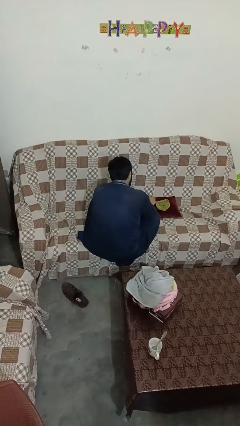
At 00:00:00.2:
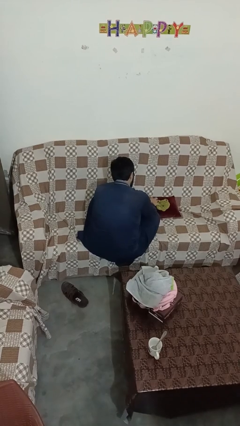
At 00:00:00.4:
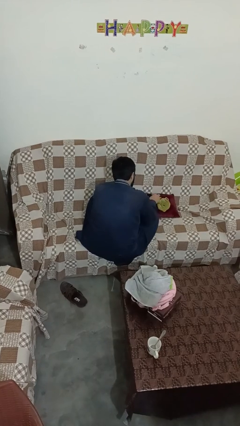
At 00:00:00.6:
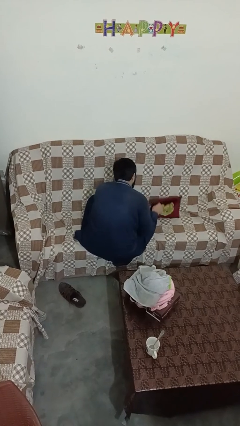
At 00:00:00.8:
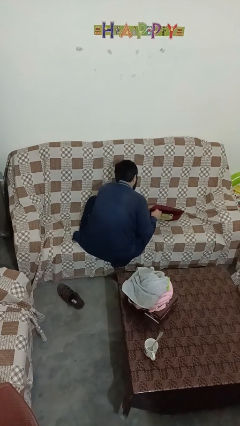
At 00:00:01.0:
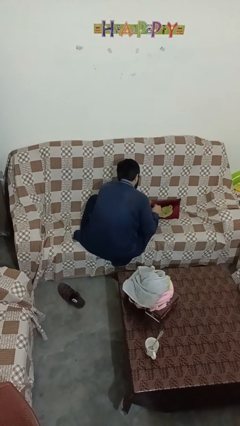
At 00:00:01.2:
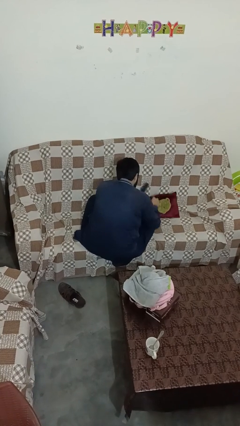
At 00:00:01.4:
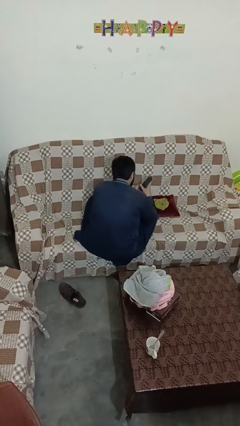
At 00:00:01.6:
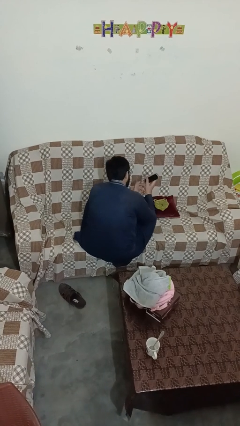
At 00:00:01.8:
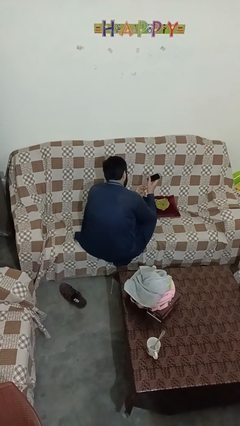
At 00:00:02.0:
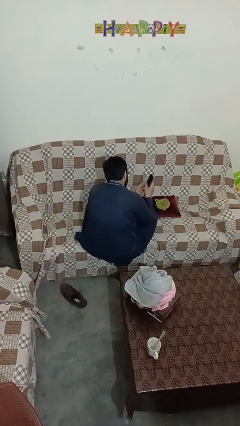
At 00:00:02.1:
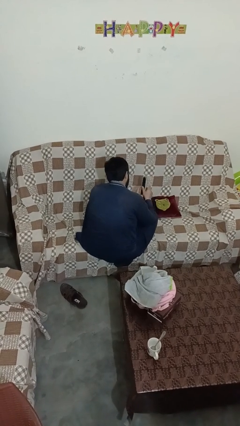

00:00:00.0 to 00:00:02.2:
person searches in couch

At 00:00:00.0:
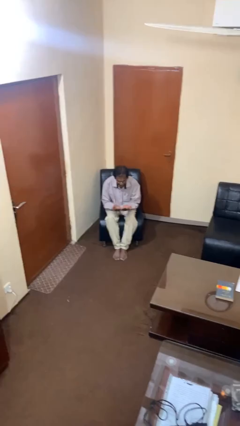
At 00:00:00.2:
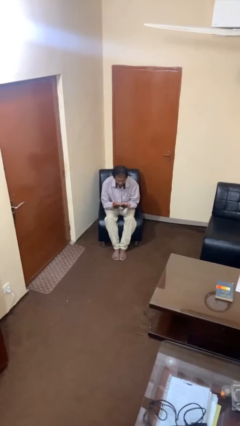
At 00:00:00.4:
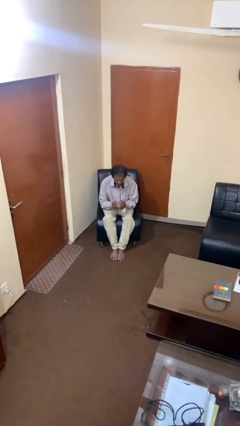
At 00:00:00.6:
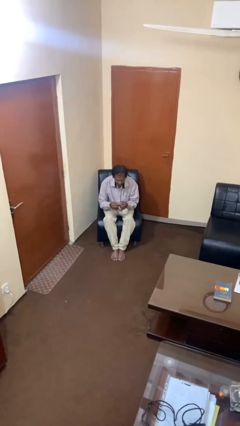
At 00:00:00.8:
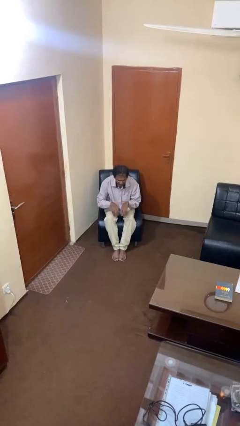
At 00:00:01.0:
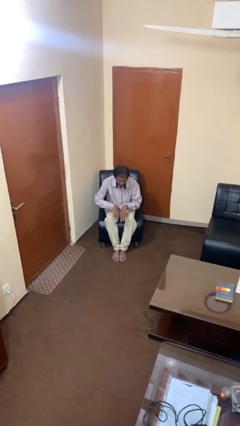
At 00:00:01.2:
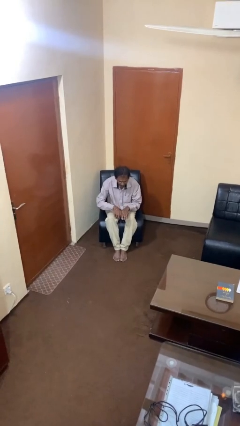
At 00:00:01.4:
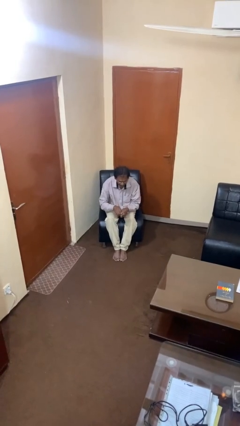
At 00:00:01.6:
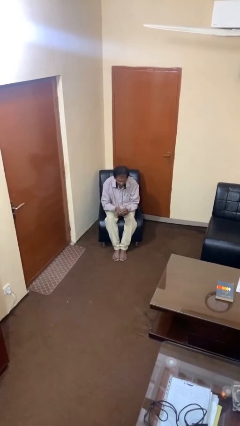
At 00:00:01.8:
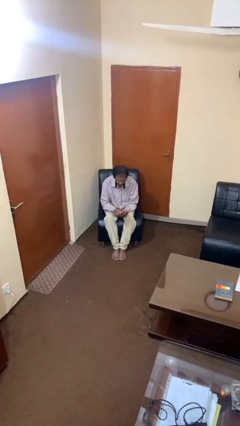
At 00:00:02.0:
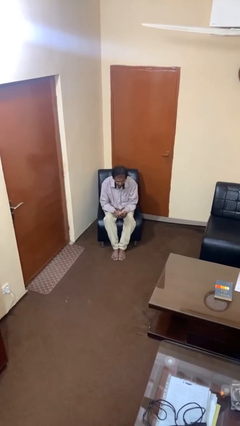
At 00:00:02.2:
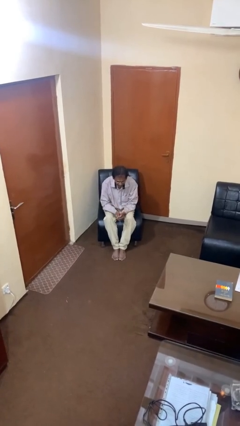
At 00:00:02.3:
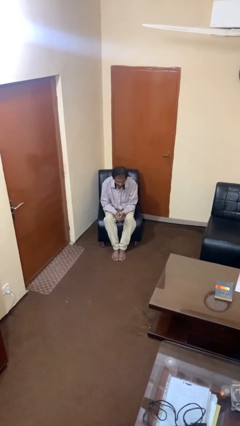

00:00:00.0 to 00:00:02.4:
person looks at hands in lap

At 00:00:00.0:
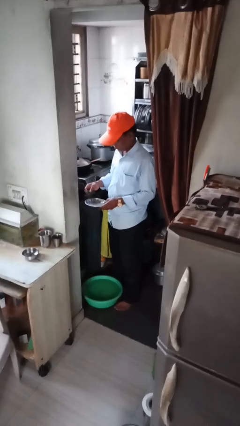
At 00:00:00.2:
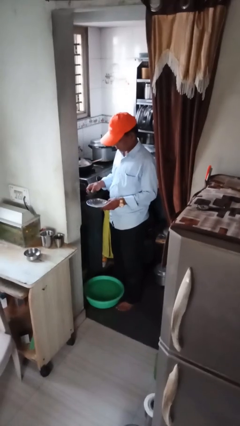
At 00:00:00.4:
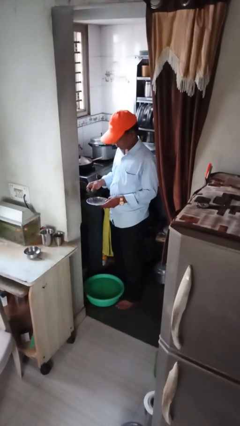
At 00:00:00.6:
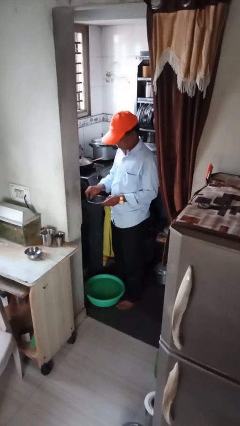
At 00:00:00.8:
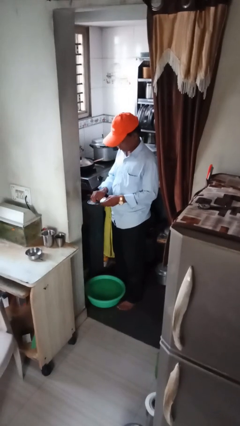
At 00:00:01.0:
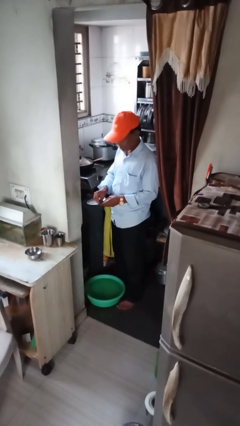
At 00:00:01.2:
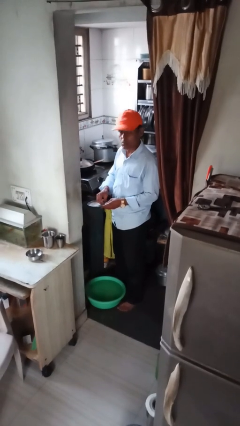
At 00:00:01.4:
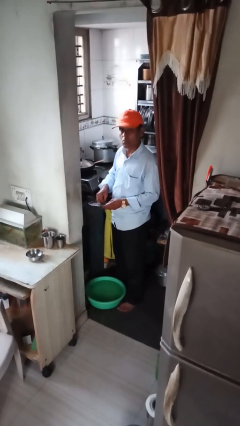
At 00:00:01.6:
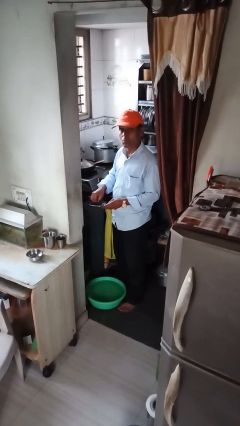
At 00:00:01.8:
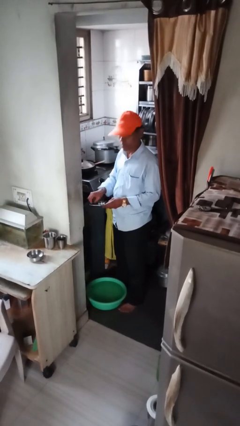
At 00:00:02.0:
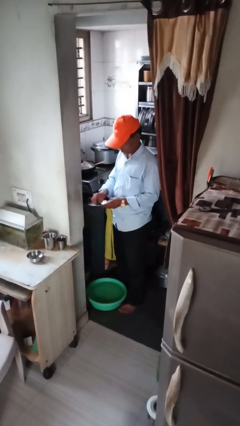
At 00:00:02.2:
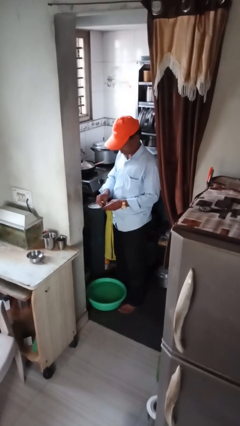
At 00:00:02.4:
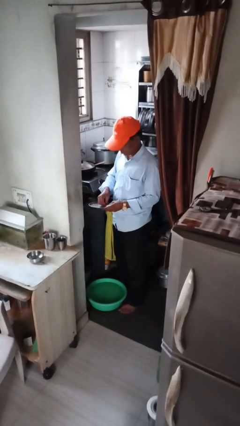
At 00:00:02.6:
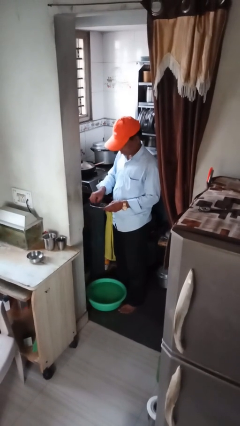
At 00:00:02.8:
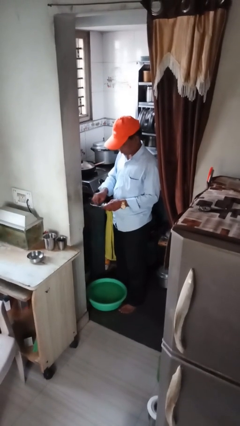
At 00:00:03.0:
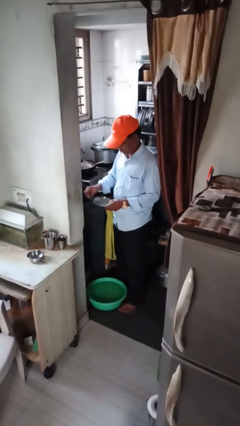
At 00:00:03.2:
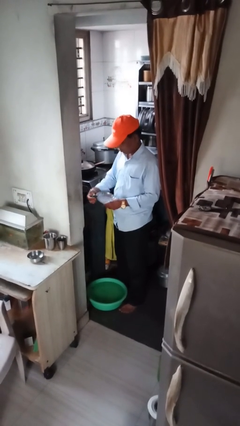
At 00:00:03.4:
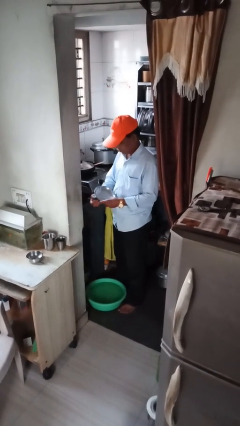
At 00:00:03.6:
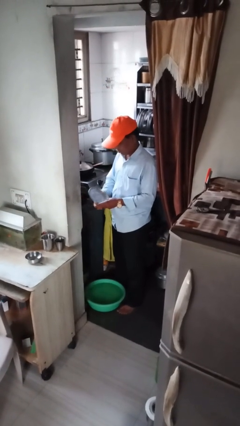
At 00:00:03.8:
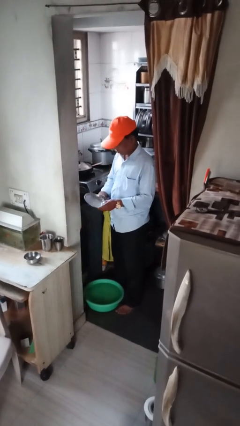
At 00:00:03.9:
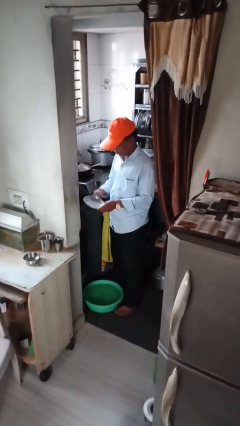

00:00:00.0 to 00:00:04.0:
person washes dish

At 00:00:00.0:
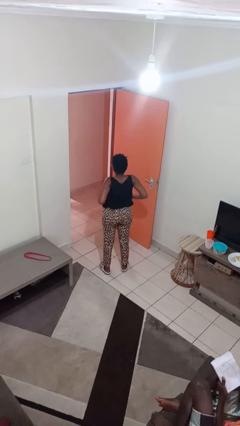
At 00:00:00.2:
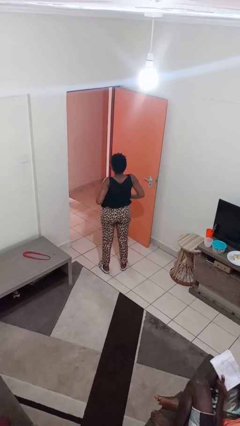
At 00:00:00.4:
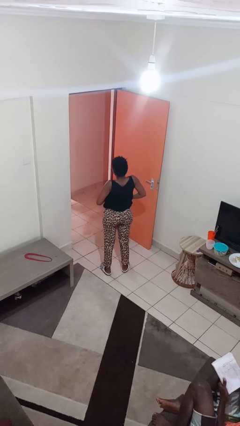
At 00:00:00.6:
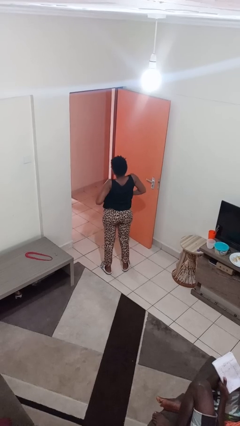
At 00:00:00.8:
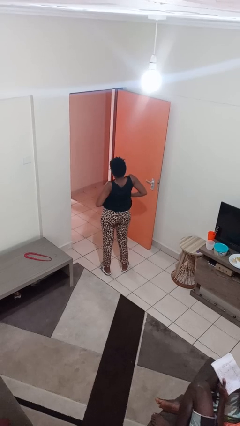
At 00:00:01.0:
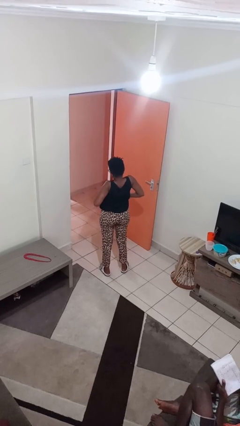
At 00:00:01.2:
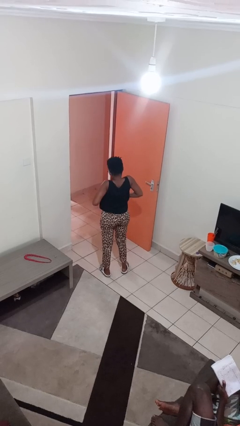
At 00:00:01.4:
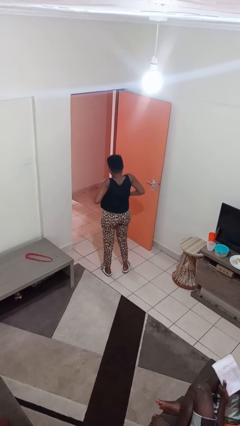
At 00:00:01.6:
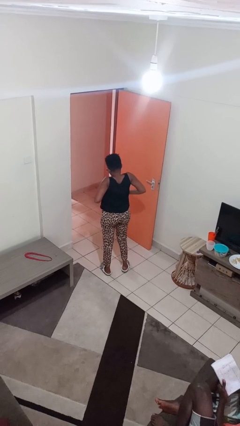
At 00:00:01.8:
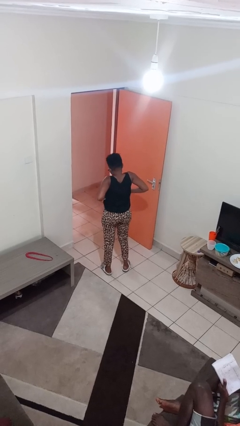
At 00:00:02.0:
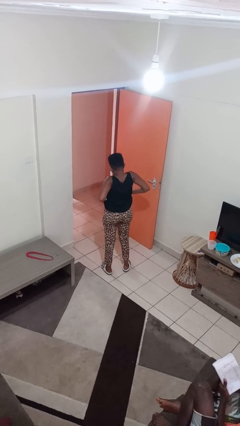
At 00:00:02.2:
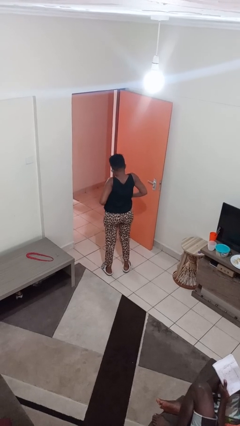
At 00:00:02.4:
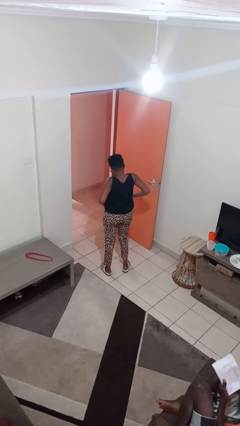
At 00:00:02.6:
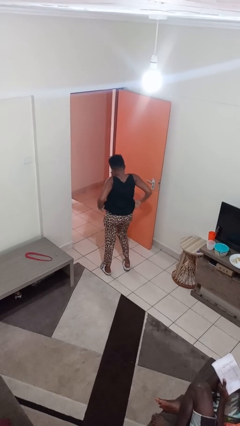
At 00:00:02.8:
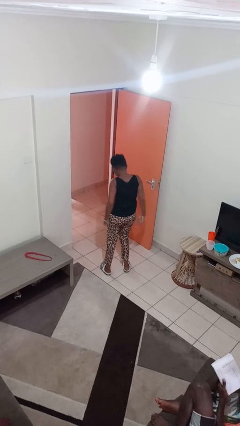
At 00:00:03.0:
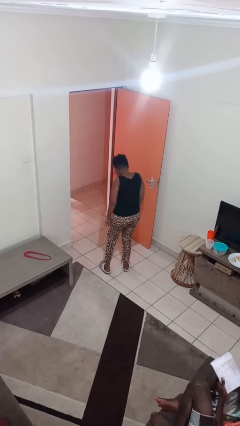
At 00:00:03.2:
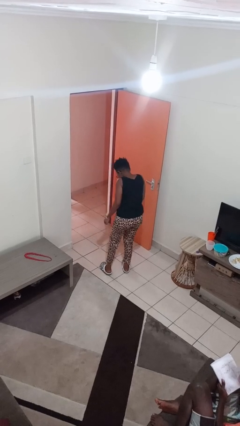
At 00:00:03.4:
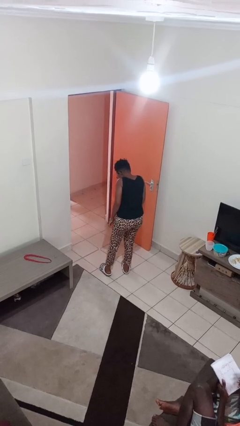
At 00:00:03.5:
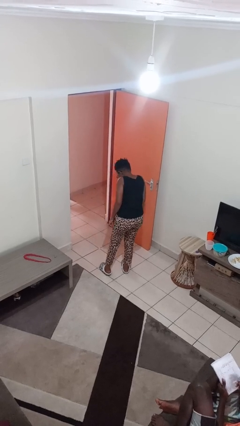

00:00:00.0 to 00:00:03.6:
person hikes up pants

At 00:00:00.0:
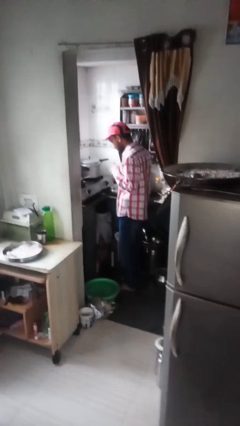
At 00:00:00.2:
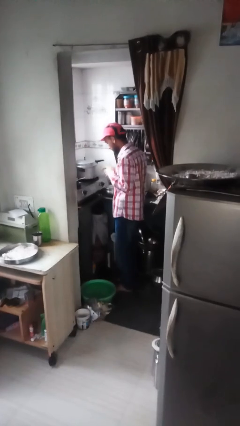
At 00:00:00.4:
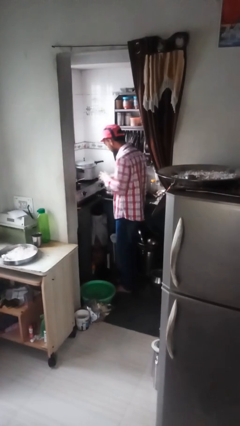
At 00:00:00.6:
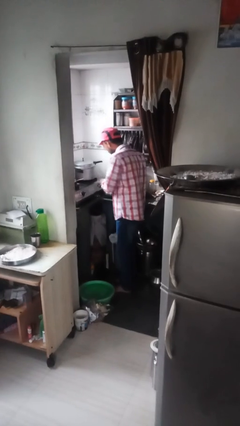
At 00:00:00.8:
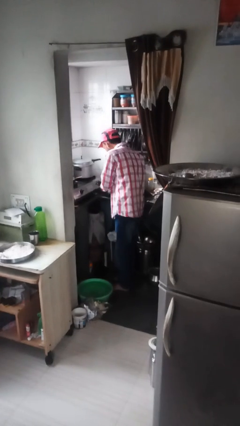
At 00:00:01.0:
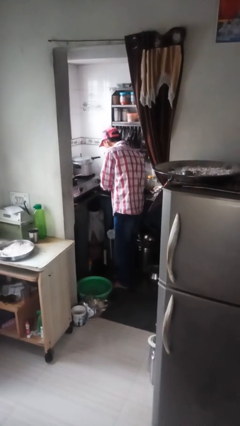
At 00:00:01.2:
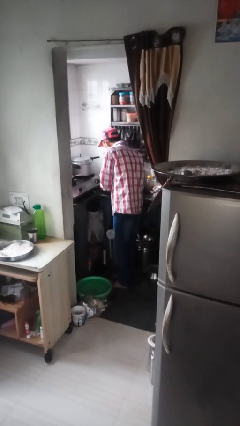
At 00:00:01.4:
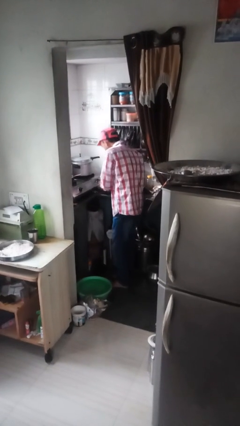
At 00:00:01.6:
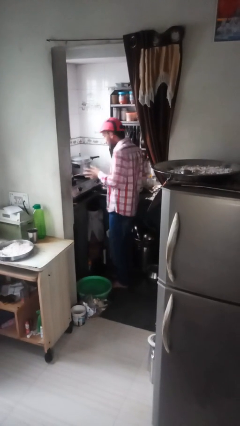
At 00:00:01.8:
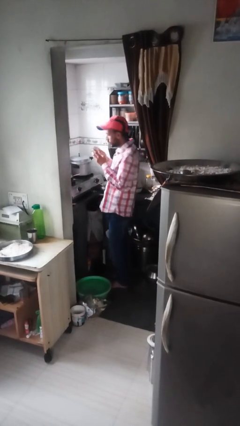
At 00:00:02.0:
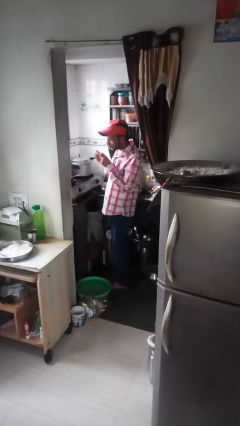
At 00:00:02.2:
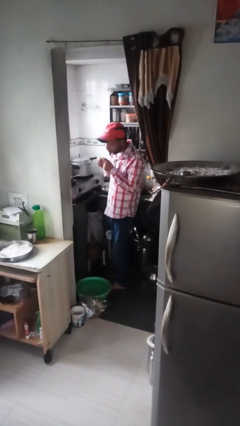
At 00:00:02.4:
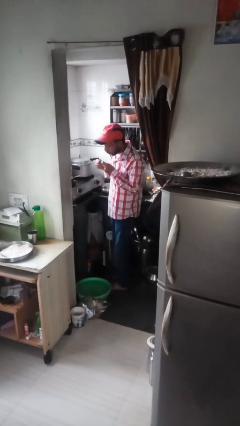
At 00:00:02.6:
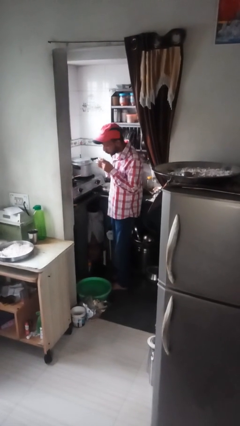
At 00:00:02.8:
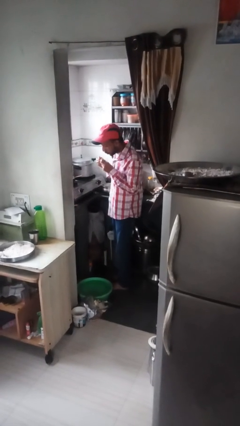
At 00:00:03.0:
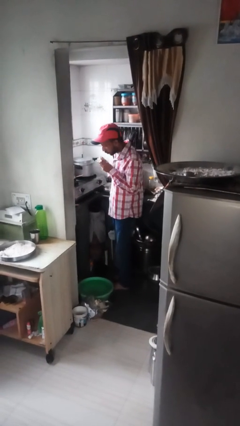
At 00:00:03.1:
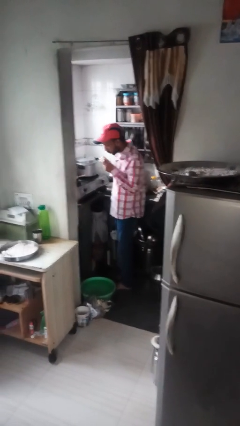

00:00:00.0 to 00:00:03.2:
person burns hand

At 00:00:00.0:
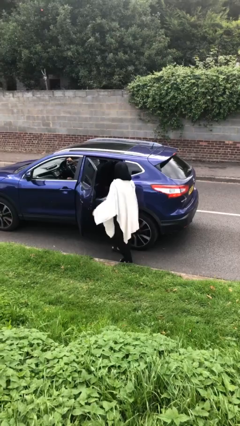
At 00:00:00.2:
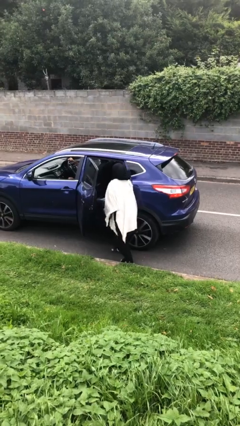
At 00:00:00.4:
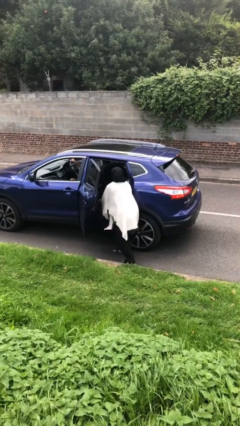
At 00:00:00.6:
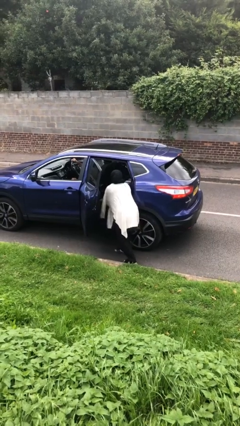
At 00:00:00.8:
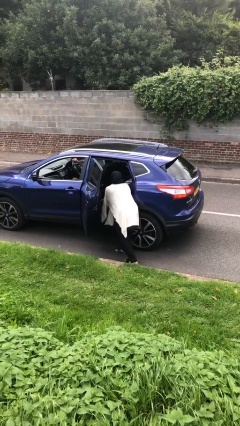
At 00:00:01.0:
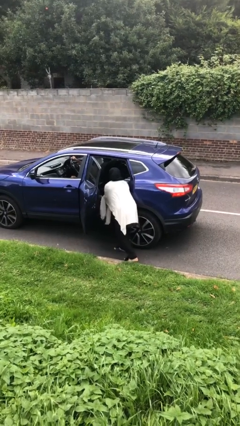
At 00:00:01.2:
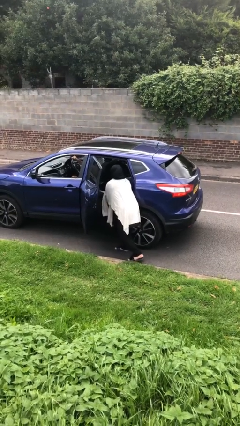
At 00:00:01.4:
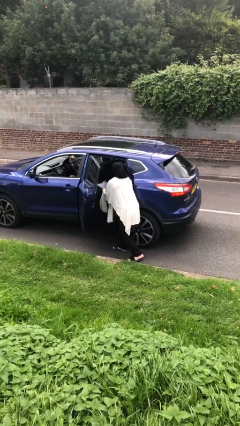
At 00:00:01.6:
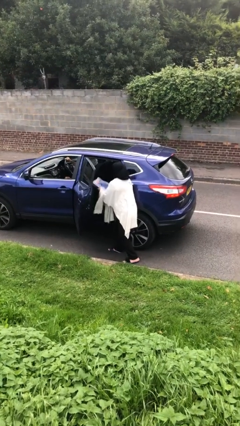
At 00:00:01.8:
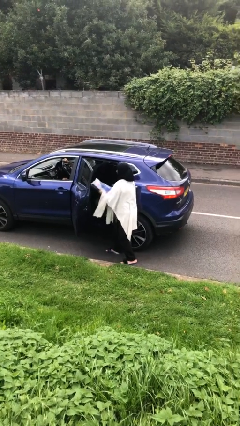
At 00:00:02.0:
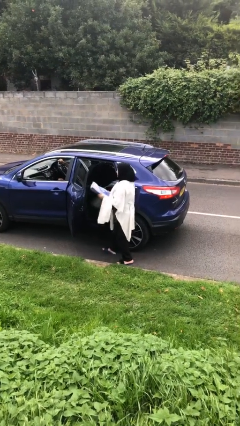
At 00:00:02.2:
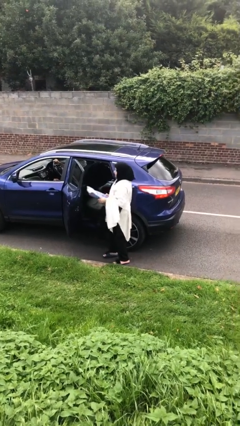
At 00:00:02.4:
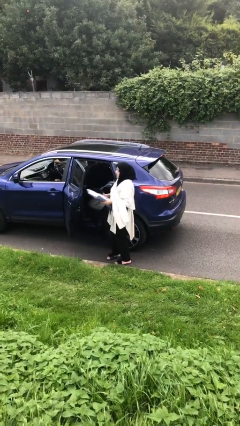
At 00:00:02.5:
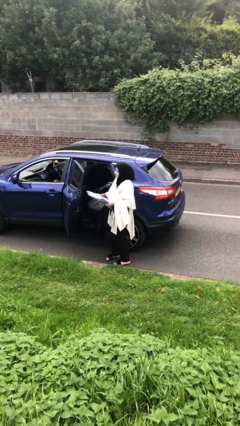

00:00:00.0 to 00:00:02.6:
person unloads car
